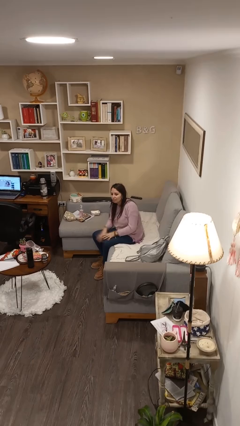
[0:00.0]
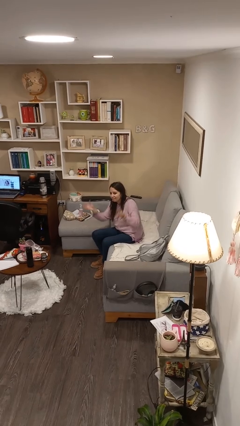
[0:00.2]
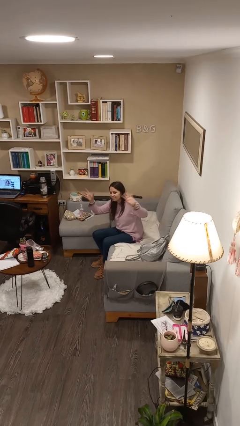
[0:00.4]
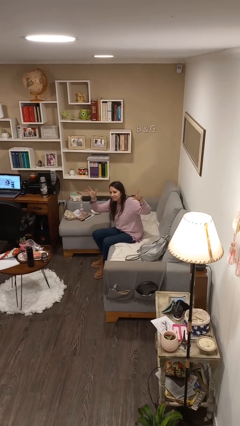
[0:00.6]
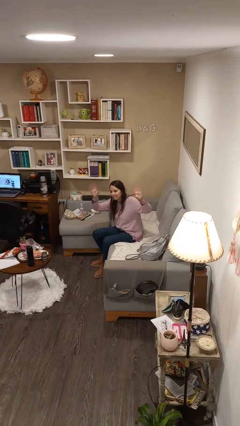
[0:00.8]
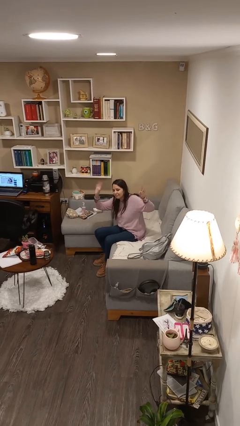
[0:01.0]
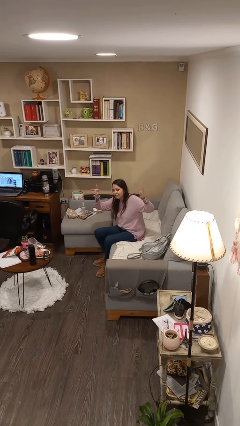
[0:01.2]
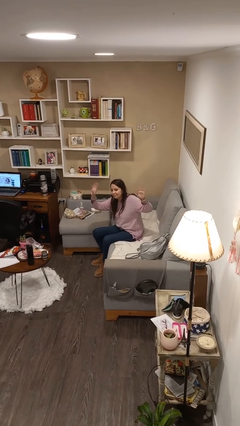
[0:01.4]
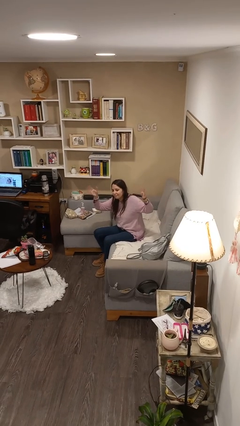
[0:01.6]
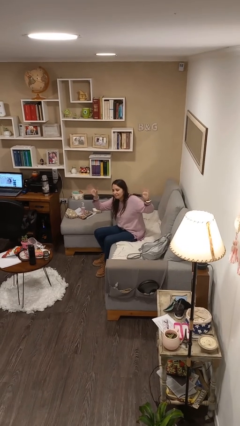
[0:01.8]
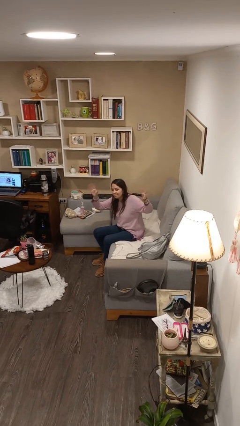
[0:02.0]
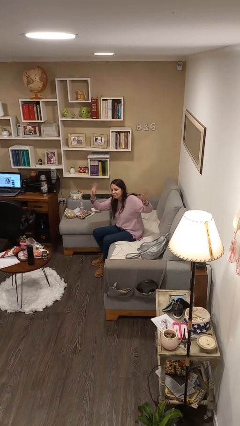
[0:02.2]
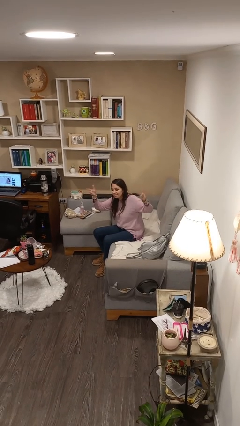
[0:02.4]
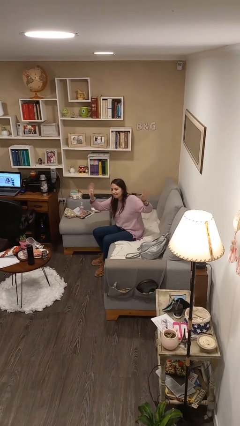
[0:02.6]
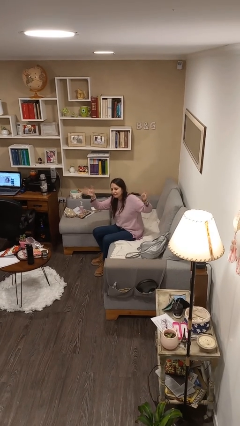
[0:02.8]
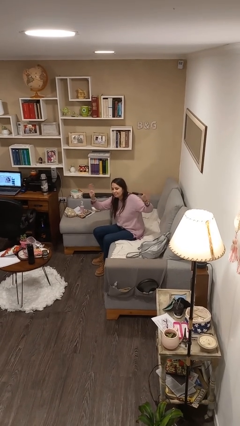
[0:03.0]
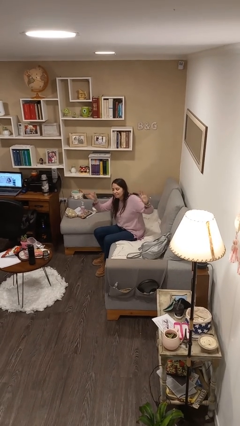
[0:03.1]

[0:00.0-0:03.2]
person waves at person

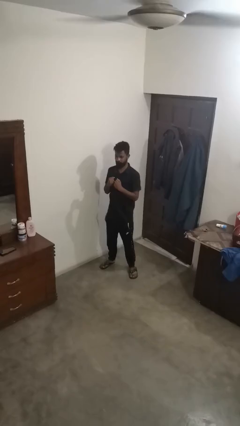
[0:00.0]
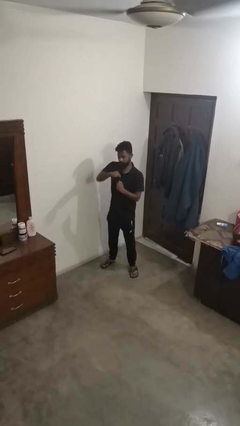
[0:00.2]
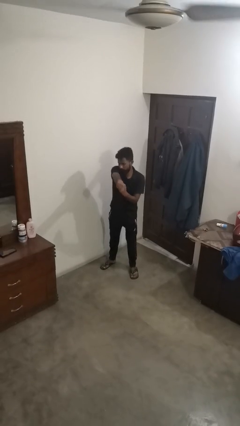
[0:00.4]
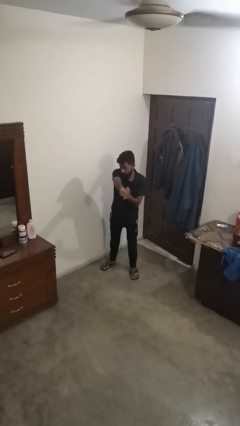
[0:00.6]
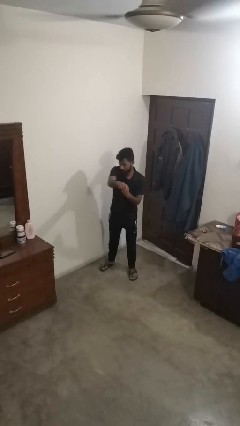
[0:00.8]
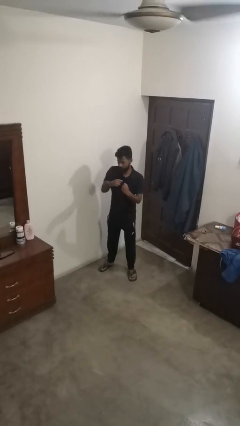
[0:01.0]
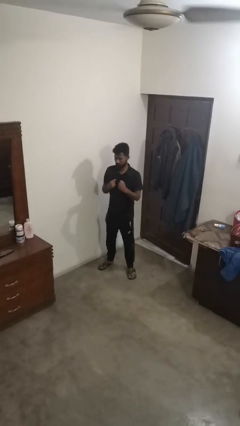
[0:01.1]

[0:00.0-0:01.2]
person punches

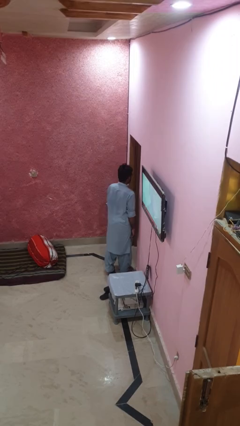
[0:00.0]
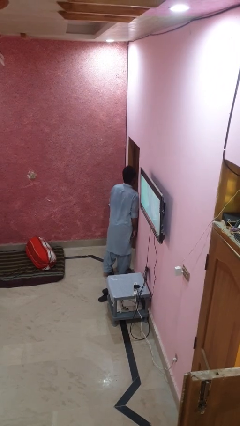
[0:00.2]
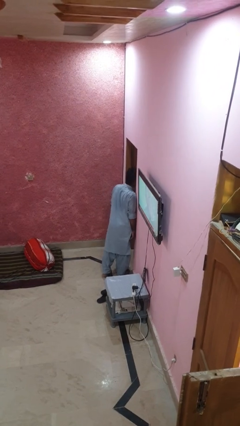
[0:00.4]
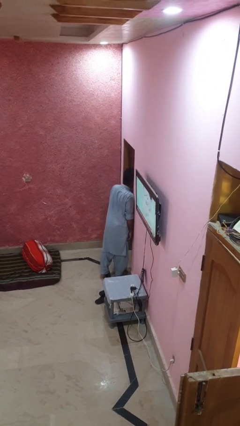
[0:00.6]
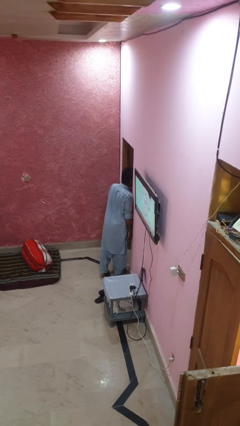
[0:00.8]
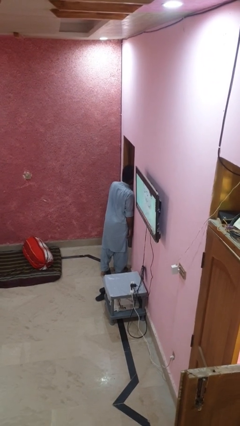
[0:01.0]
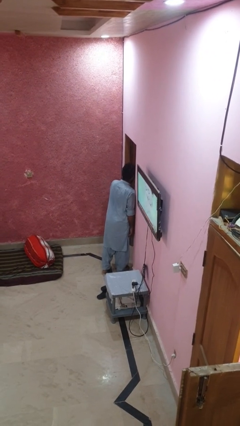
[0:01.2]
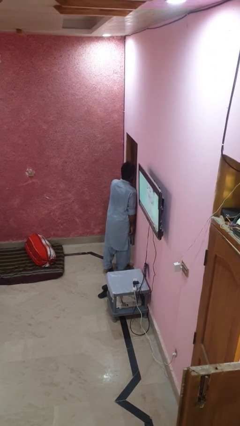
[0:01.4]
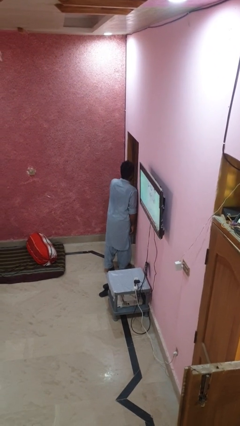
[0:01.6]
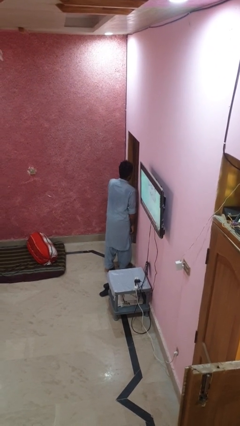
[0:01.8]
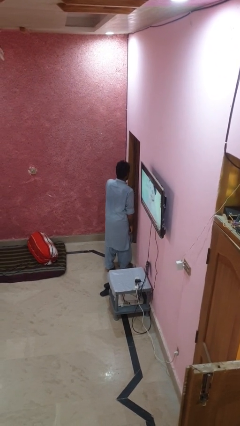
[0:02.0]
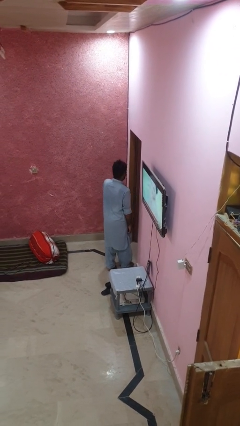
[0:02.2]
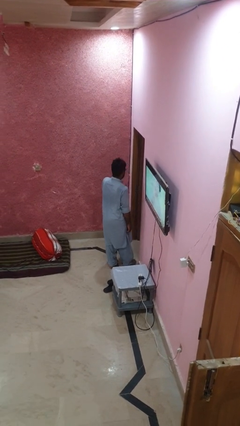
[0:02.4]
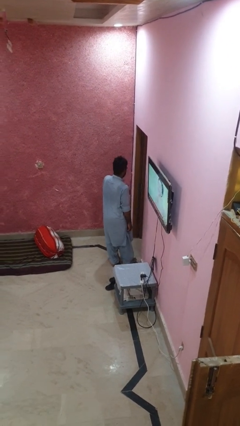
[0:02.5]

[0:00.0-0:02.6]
person bumps into wall

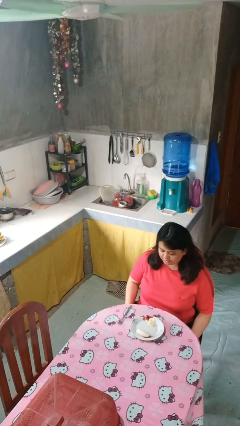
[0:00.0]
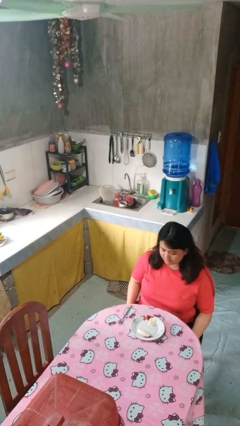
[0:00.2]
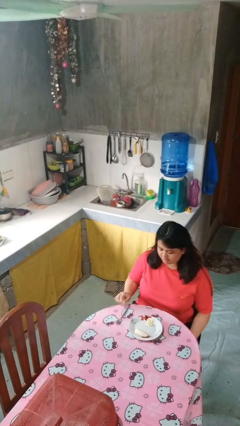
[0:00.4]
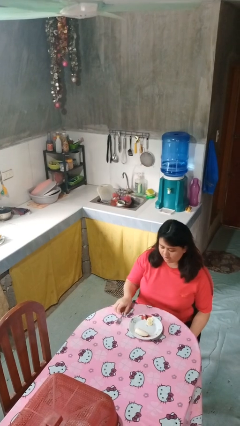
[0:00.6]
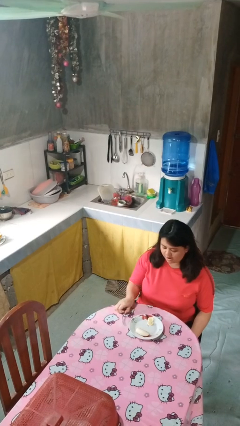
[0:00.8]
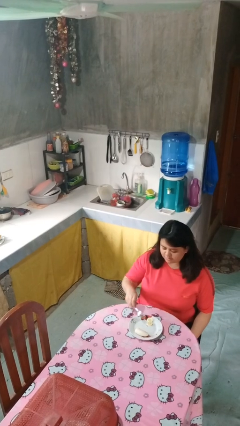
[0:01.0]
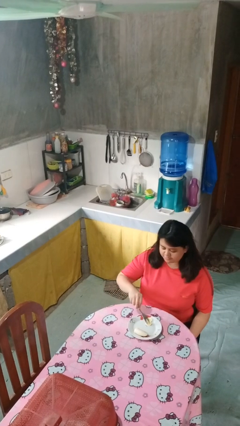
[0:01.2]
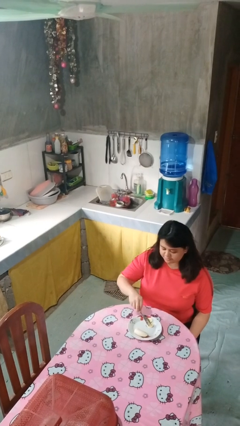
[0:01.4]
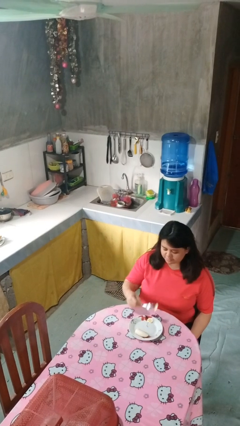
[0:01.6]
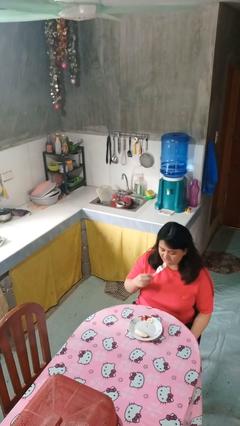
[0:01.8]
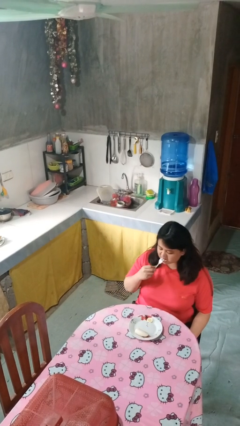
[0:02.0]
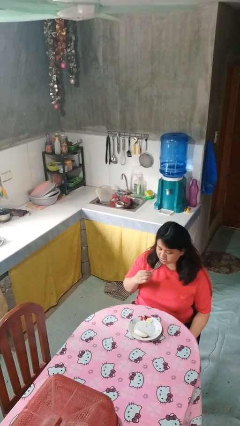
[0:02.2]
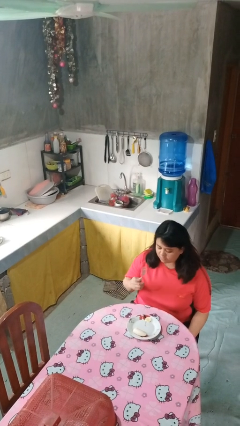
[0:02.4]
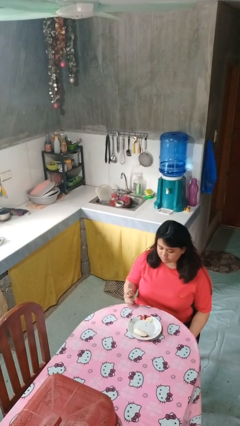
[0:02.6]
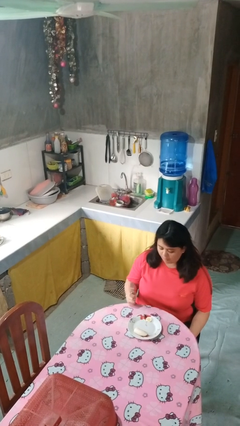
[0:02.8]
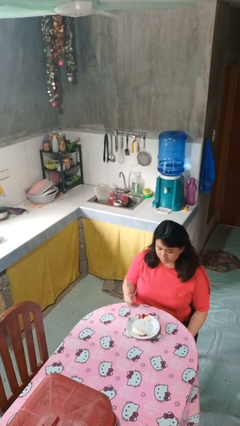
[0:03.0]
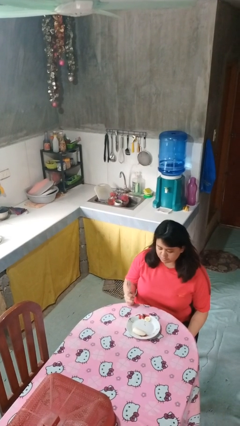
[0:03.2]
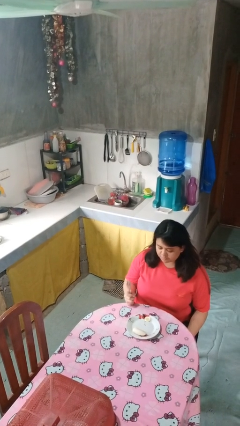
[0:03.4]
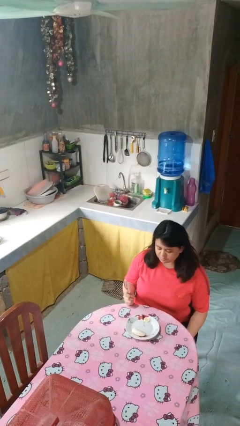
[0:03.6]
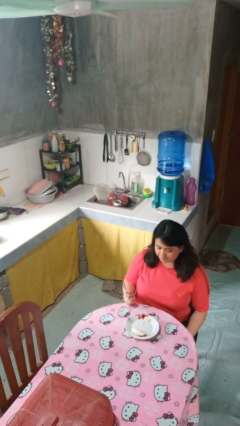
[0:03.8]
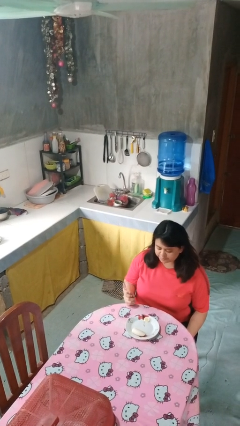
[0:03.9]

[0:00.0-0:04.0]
person eats with utensil

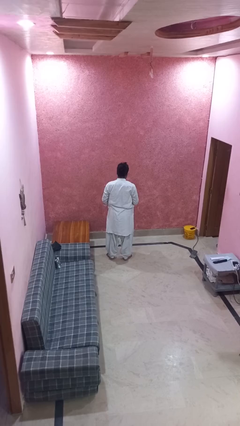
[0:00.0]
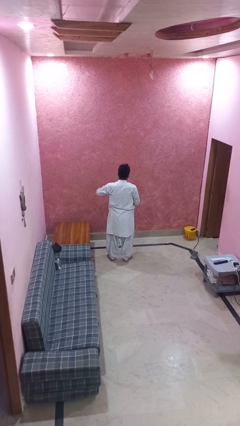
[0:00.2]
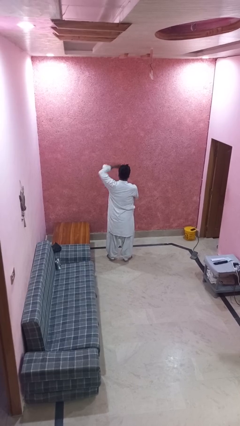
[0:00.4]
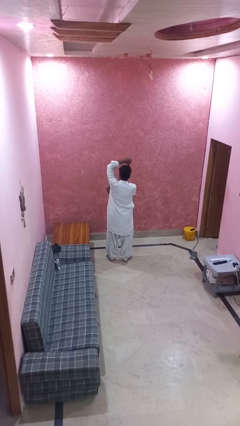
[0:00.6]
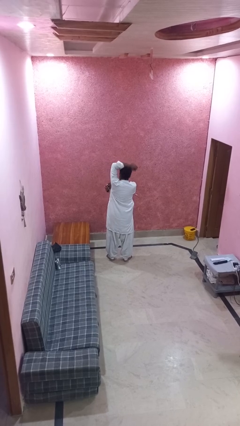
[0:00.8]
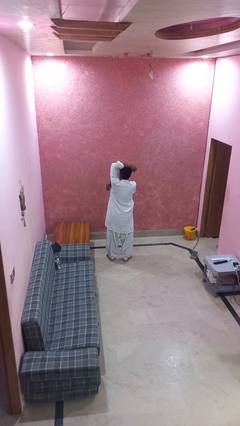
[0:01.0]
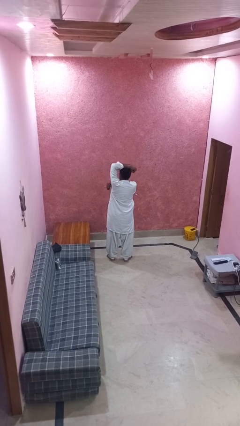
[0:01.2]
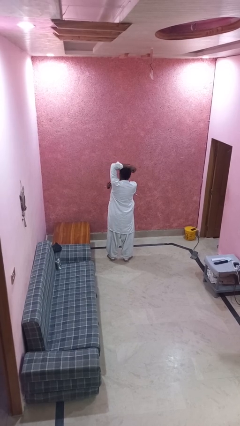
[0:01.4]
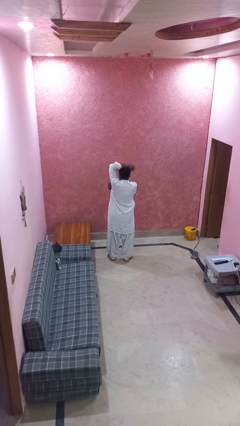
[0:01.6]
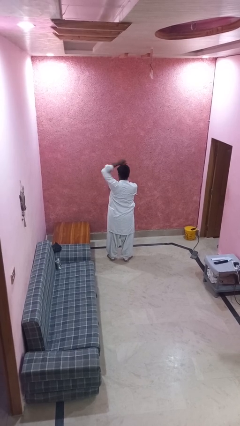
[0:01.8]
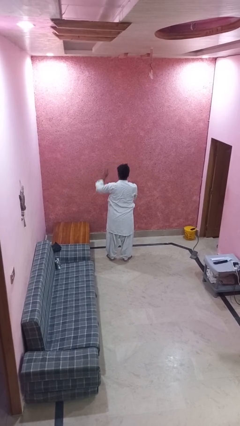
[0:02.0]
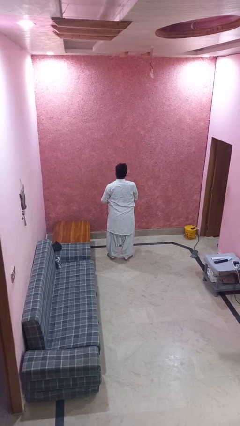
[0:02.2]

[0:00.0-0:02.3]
person applies deodorant

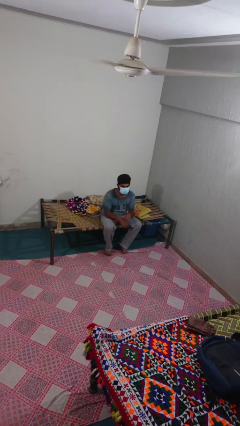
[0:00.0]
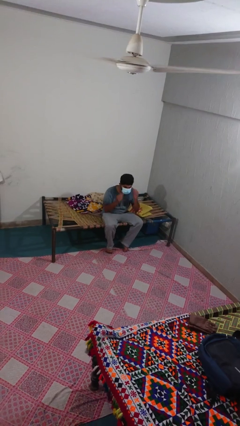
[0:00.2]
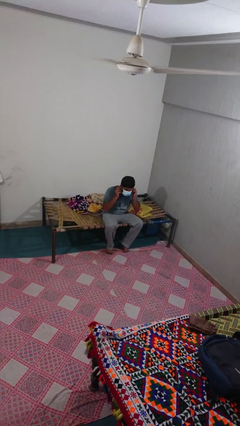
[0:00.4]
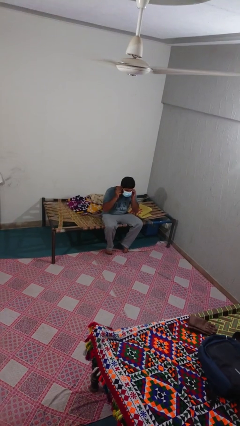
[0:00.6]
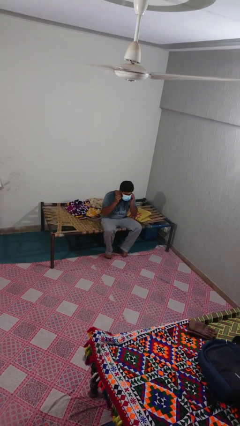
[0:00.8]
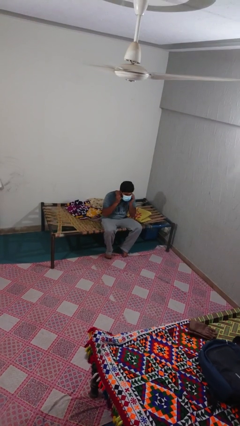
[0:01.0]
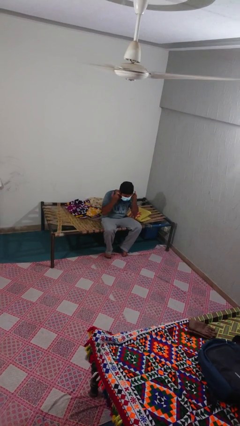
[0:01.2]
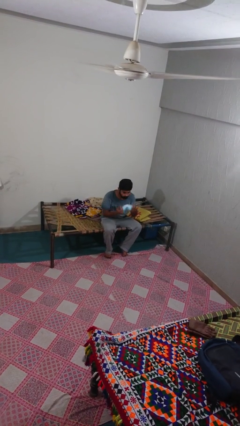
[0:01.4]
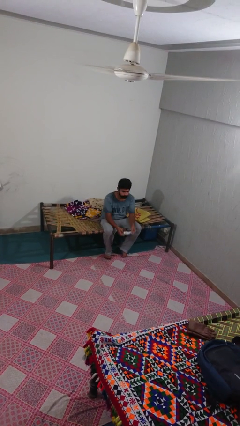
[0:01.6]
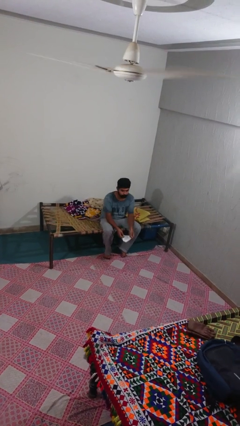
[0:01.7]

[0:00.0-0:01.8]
person takes off facemask

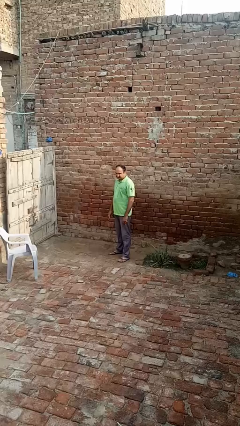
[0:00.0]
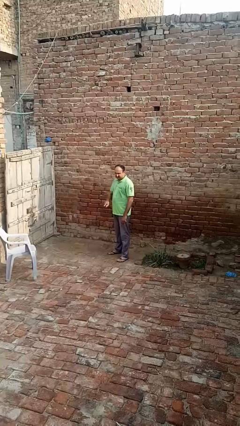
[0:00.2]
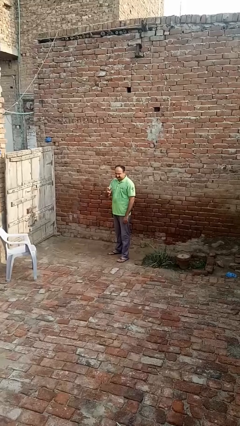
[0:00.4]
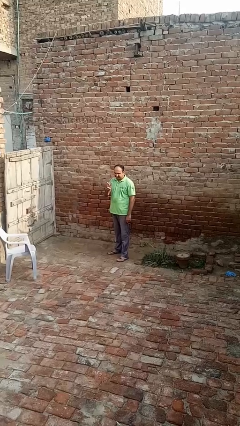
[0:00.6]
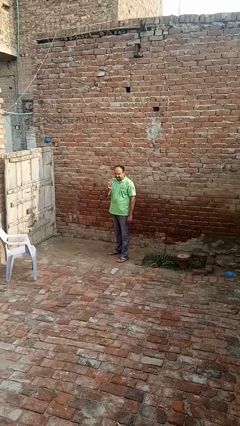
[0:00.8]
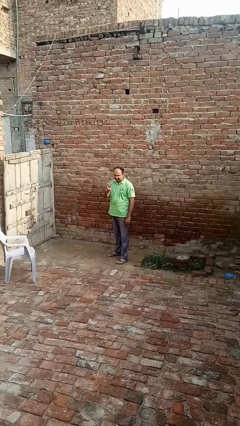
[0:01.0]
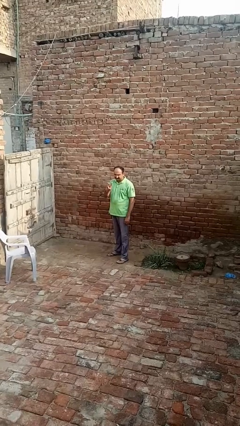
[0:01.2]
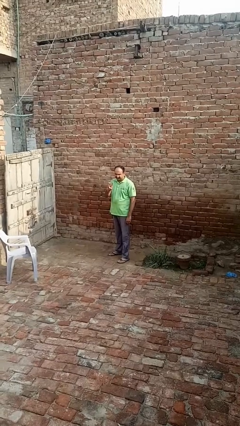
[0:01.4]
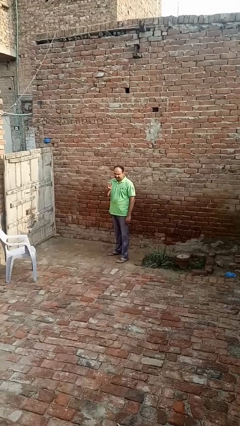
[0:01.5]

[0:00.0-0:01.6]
person gestures peace

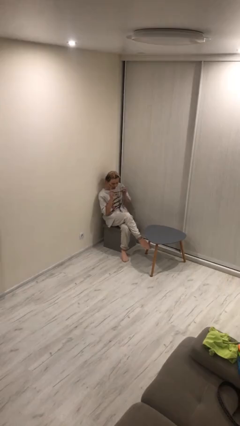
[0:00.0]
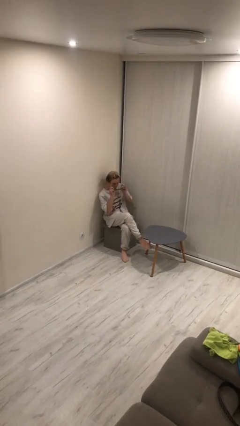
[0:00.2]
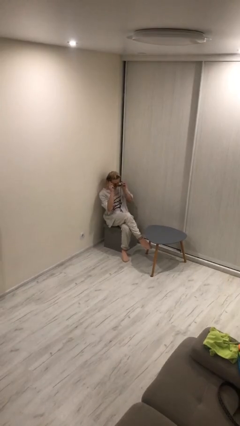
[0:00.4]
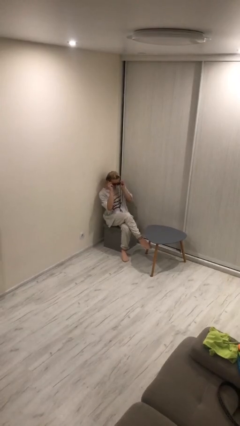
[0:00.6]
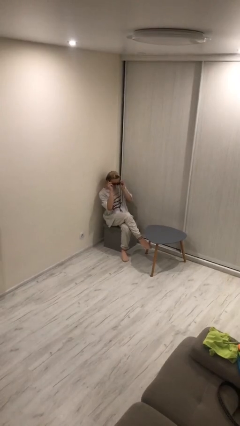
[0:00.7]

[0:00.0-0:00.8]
person puts on sunglasses
